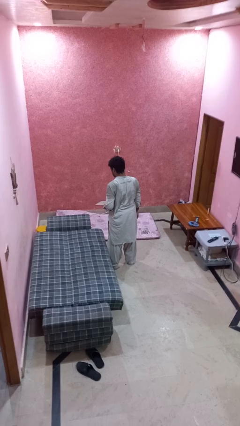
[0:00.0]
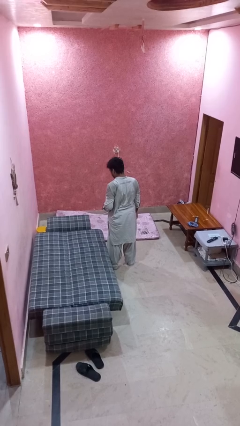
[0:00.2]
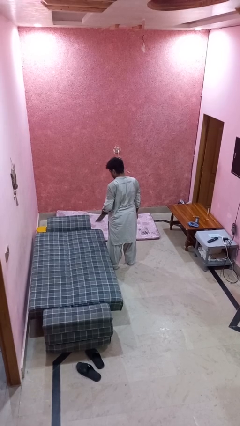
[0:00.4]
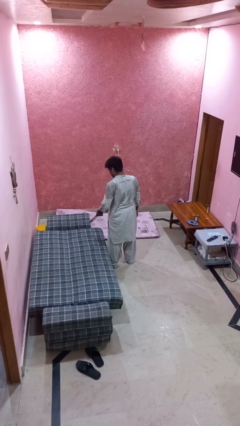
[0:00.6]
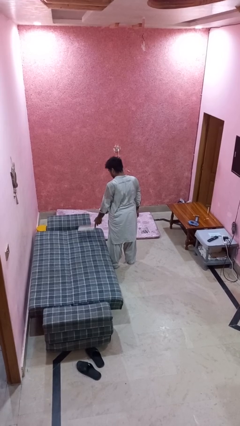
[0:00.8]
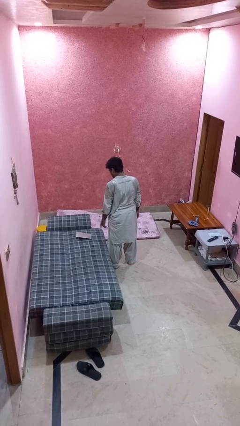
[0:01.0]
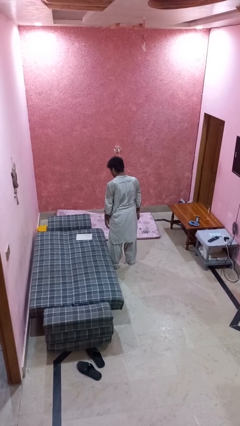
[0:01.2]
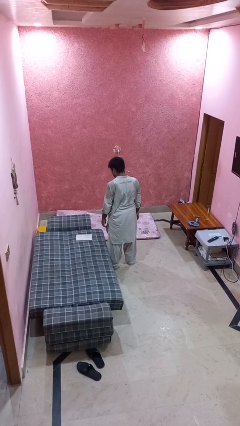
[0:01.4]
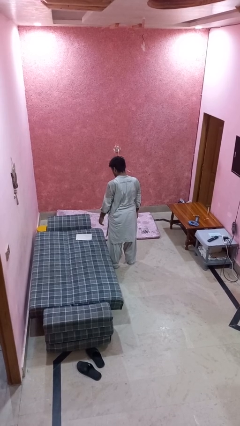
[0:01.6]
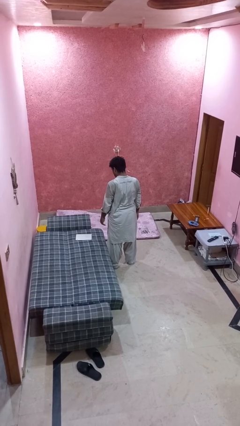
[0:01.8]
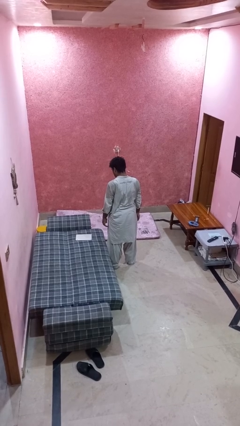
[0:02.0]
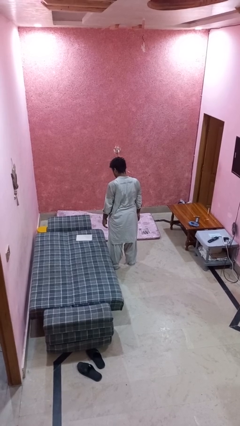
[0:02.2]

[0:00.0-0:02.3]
person throws object on bed

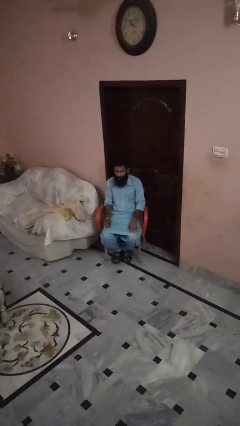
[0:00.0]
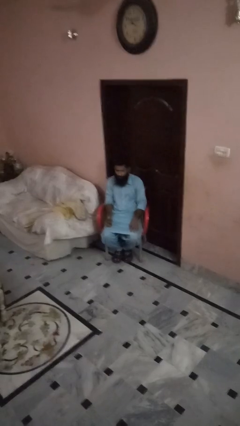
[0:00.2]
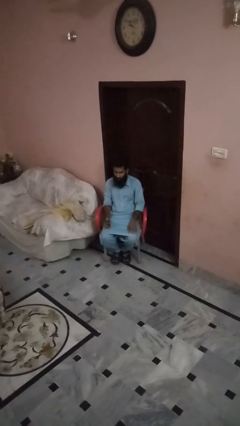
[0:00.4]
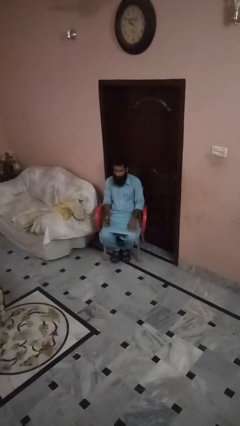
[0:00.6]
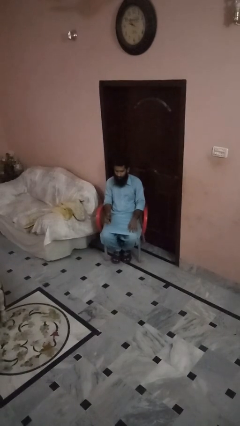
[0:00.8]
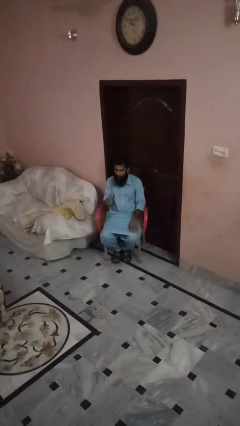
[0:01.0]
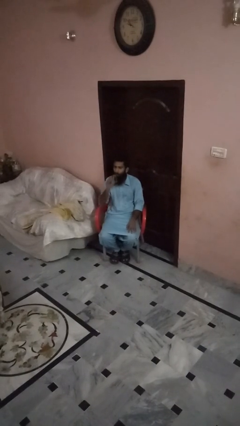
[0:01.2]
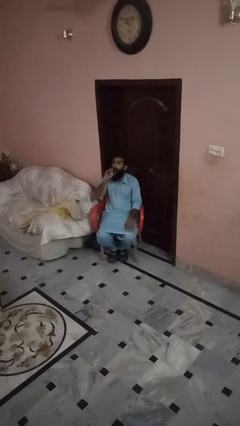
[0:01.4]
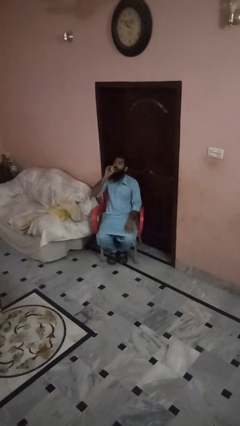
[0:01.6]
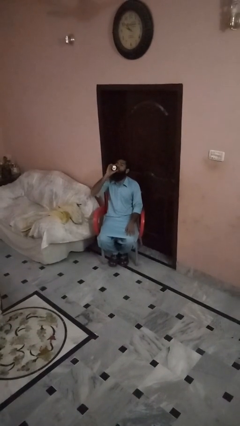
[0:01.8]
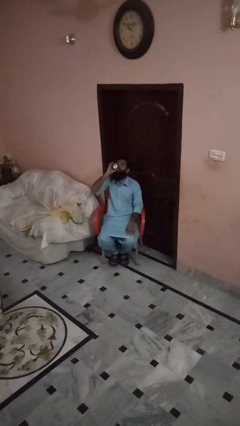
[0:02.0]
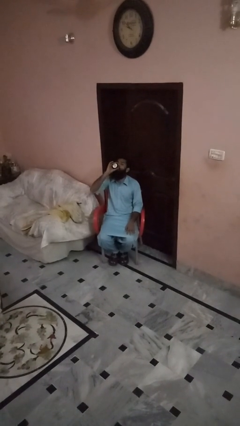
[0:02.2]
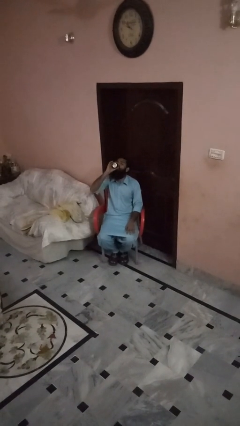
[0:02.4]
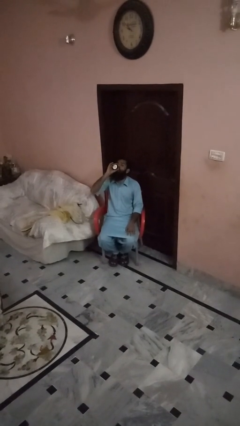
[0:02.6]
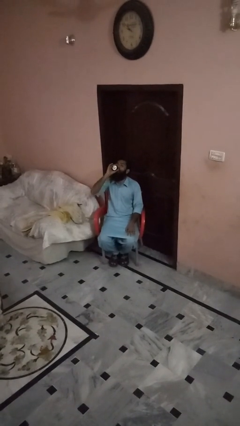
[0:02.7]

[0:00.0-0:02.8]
person drinks from beverage can

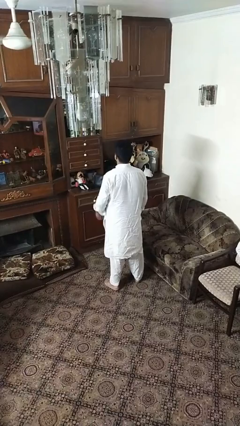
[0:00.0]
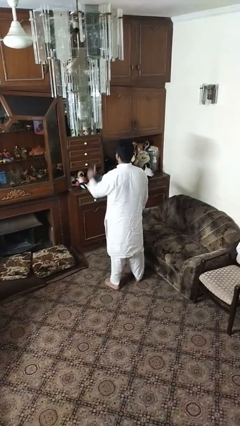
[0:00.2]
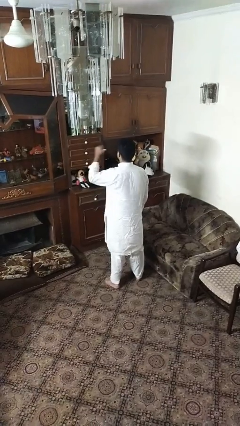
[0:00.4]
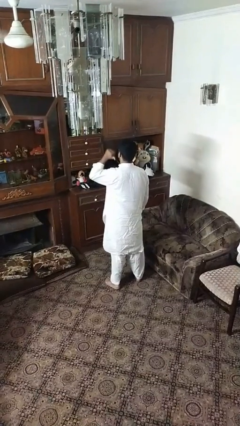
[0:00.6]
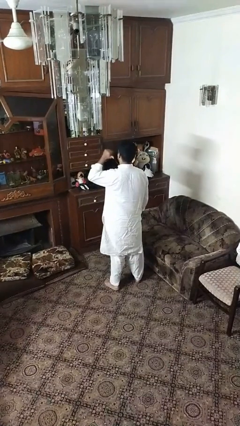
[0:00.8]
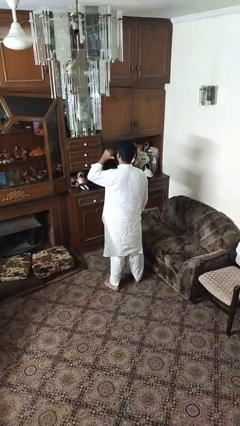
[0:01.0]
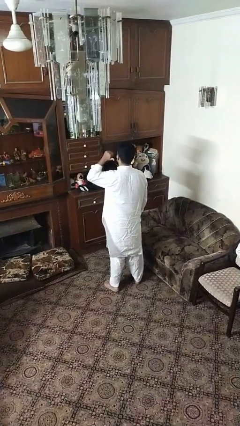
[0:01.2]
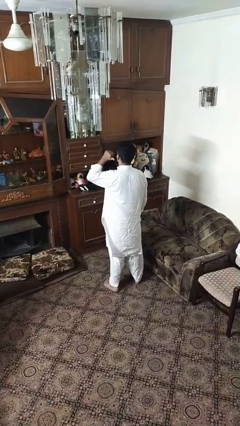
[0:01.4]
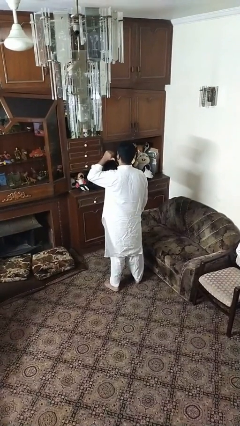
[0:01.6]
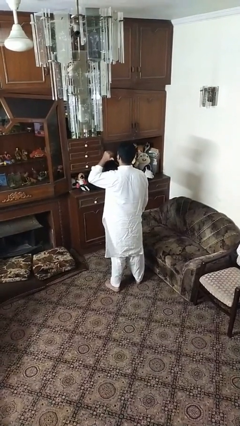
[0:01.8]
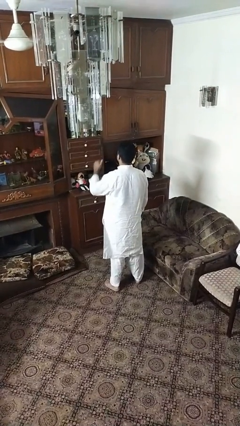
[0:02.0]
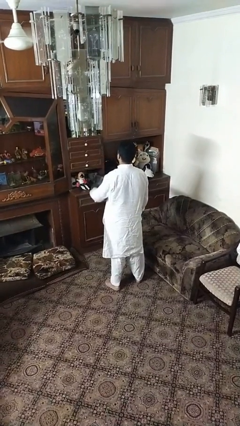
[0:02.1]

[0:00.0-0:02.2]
person gestures behind me

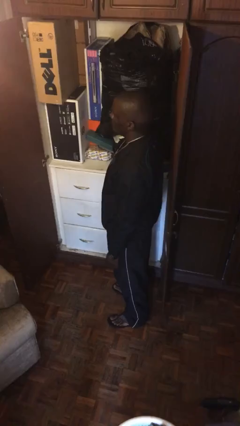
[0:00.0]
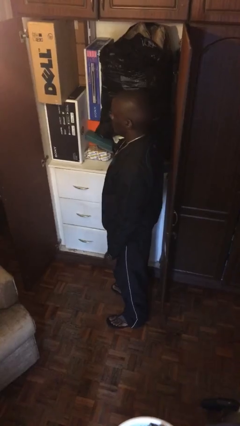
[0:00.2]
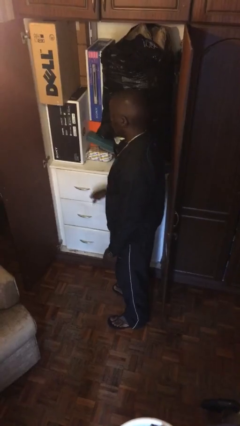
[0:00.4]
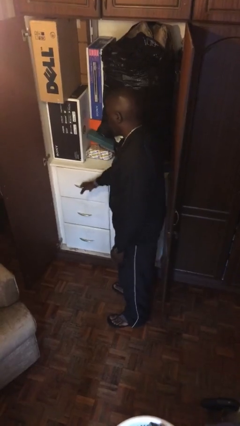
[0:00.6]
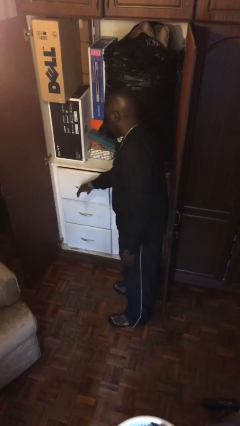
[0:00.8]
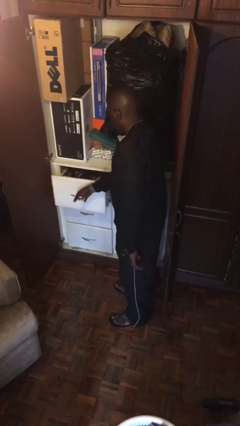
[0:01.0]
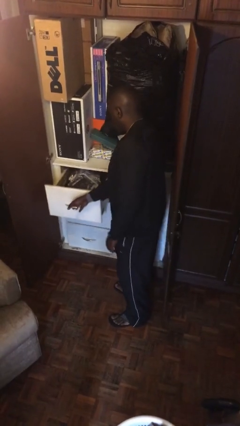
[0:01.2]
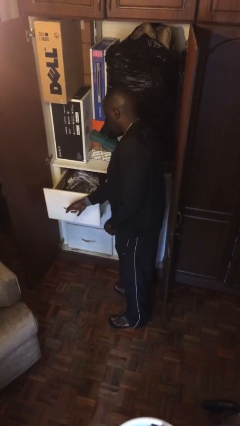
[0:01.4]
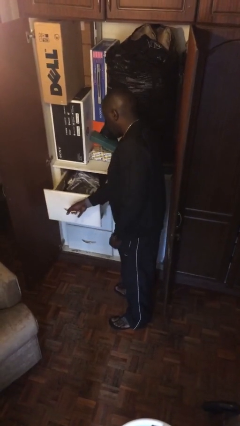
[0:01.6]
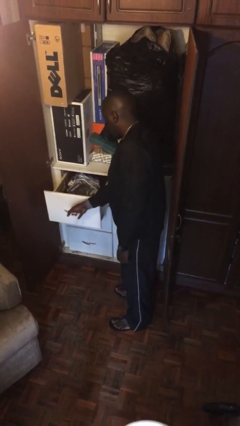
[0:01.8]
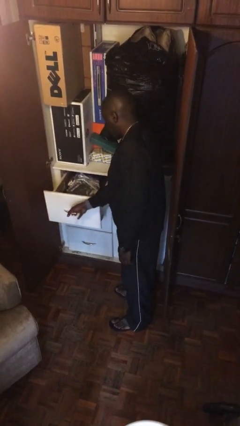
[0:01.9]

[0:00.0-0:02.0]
person opens dresser drawer

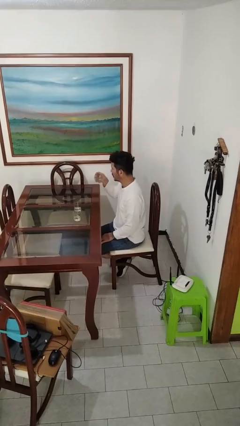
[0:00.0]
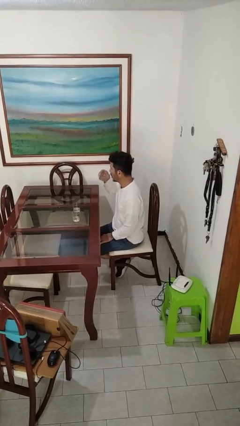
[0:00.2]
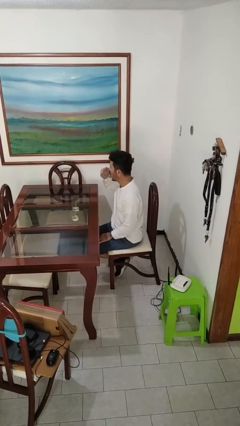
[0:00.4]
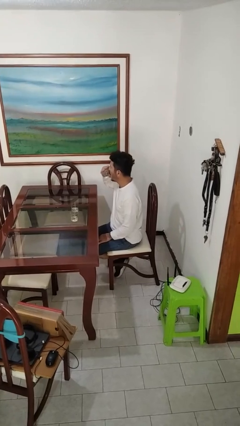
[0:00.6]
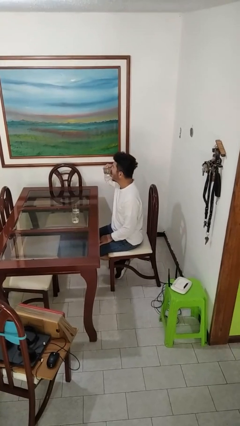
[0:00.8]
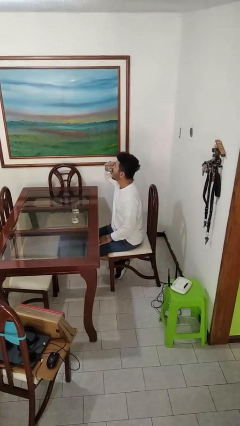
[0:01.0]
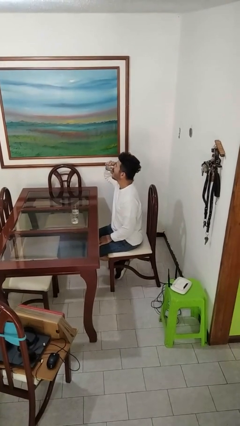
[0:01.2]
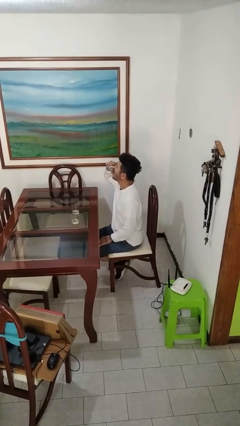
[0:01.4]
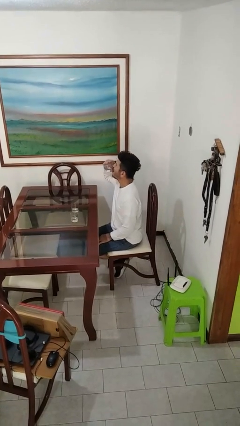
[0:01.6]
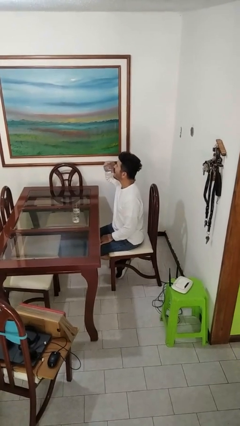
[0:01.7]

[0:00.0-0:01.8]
person drinks from shotglass

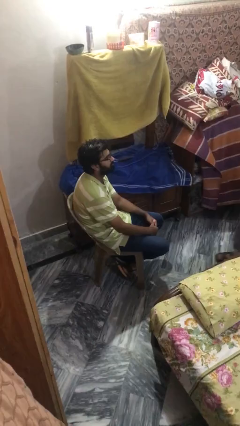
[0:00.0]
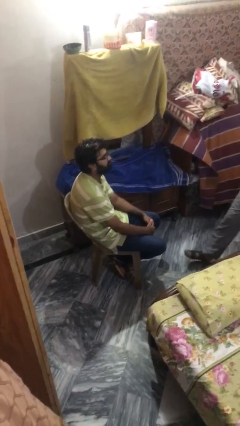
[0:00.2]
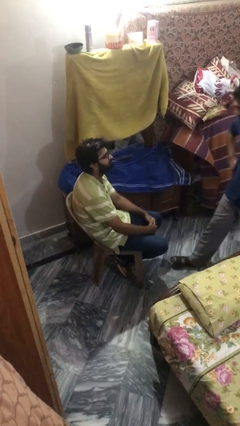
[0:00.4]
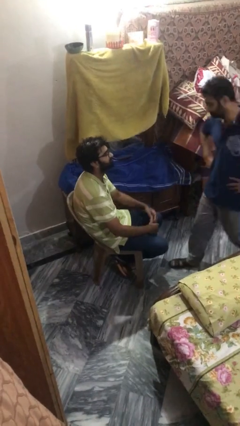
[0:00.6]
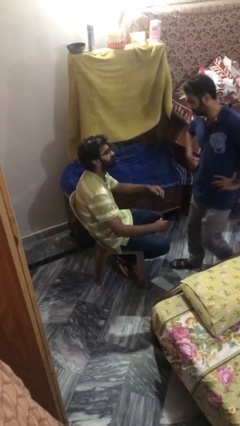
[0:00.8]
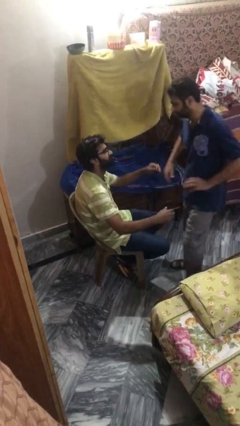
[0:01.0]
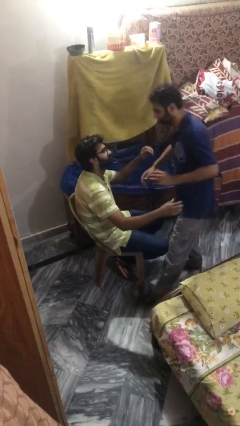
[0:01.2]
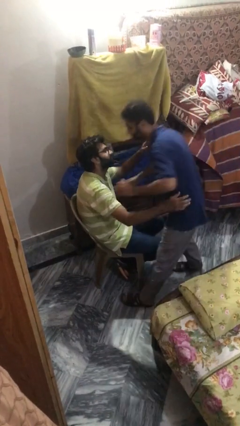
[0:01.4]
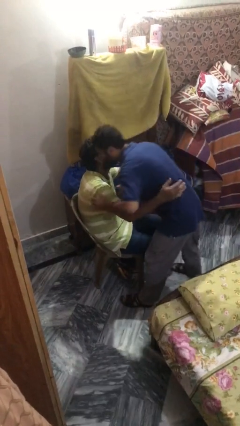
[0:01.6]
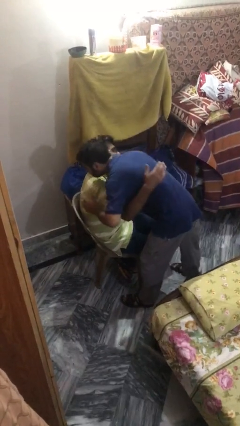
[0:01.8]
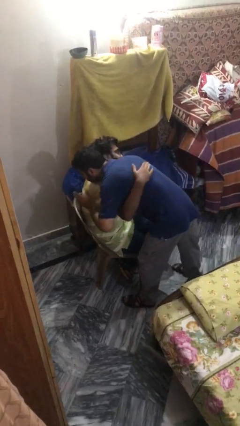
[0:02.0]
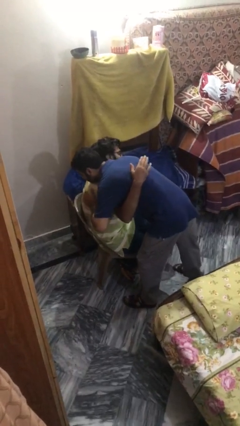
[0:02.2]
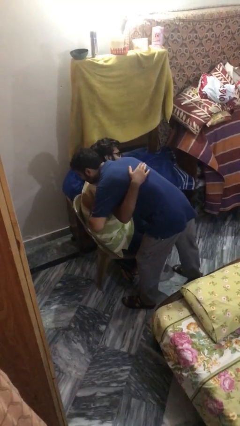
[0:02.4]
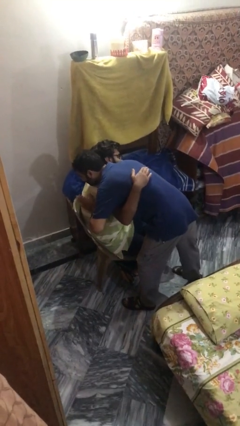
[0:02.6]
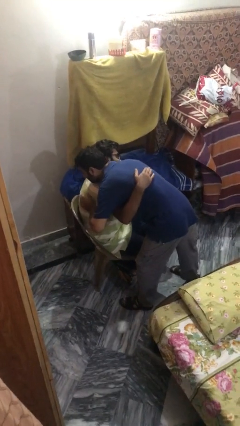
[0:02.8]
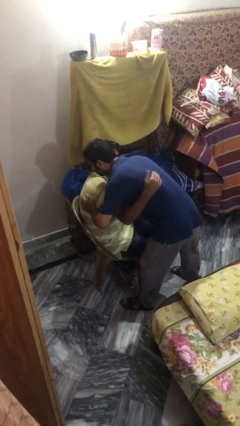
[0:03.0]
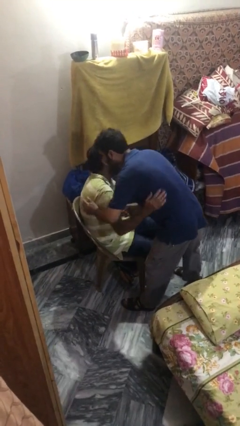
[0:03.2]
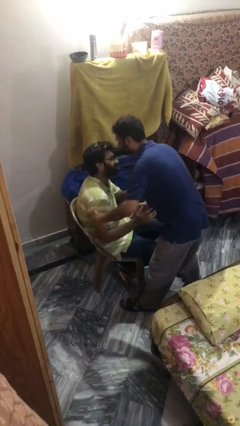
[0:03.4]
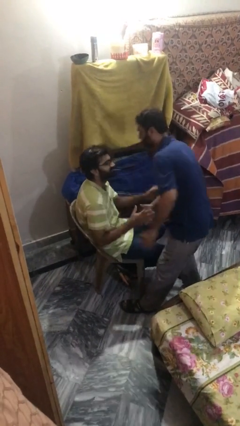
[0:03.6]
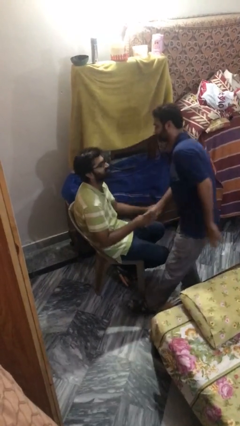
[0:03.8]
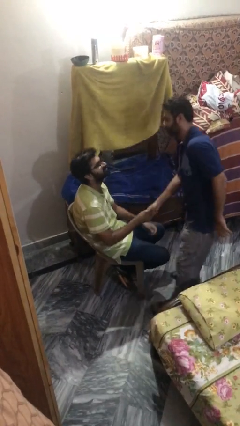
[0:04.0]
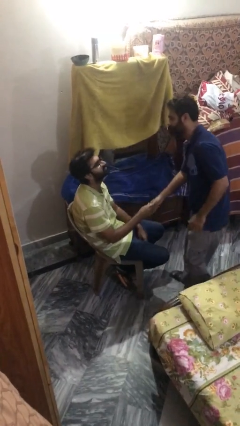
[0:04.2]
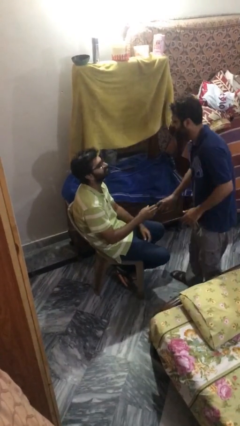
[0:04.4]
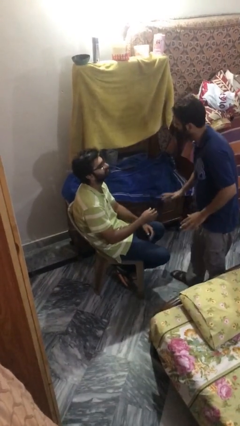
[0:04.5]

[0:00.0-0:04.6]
person embraces person

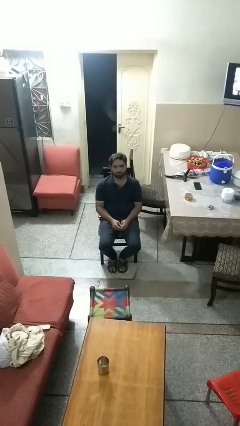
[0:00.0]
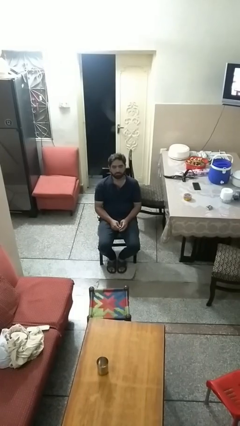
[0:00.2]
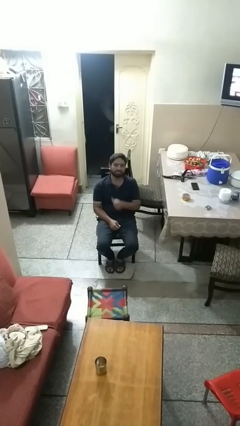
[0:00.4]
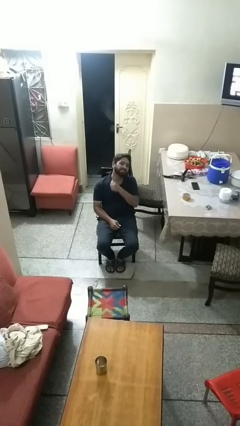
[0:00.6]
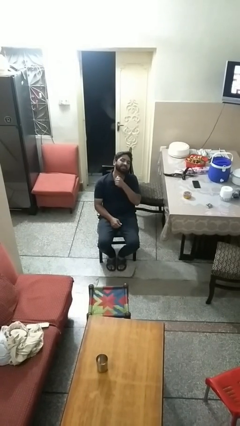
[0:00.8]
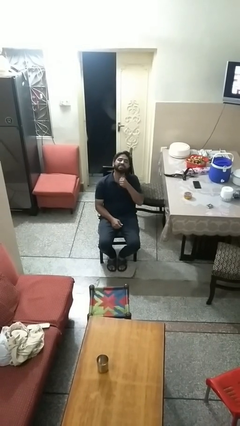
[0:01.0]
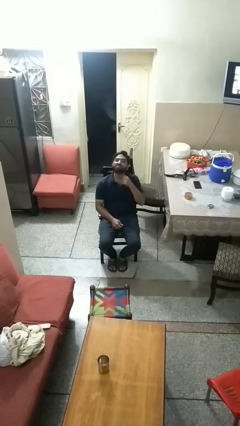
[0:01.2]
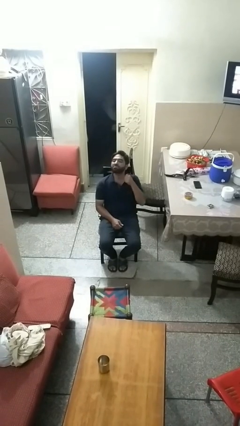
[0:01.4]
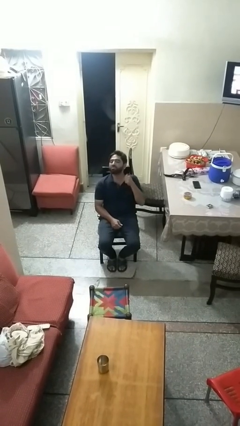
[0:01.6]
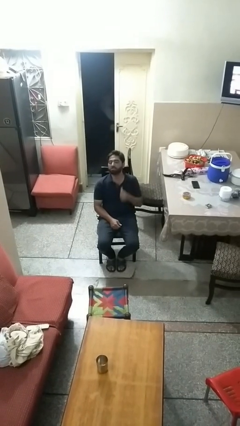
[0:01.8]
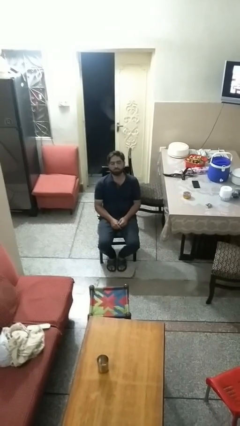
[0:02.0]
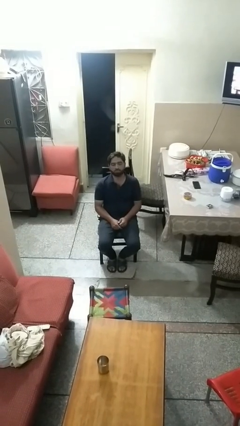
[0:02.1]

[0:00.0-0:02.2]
person gestures cut
